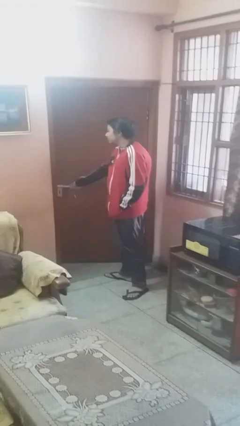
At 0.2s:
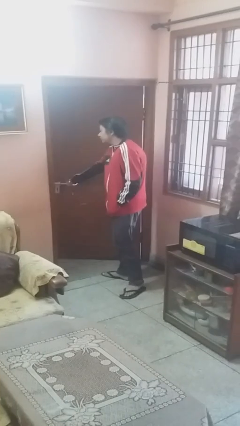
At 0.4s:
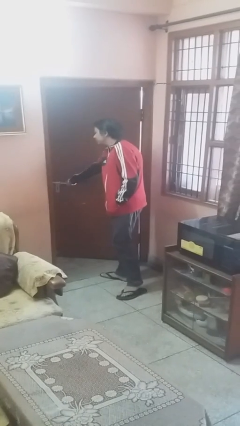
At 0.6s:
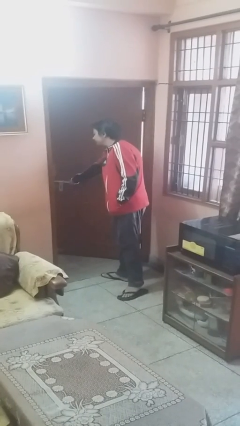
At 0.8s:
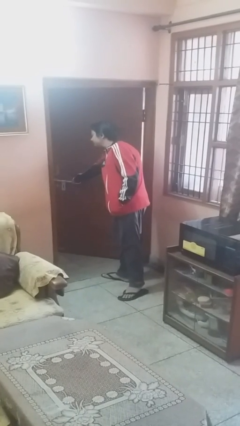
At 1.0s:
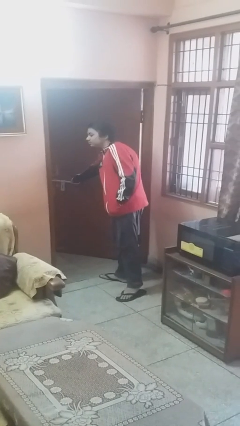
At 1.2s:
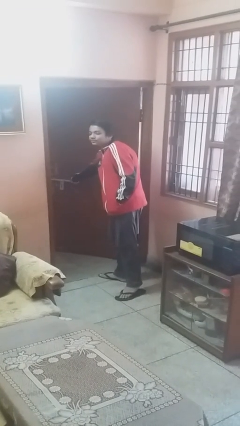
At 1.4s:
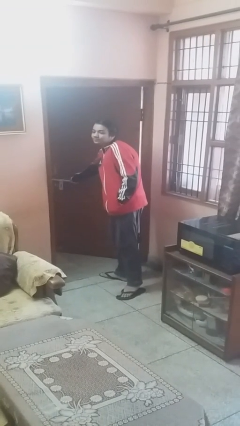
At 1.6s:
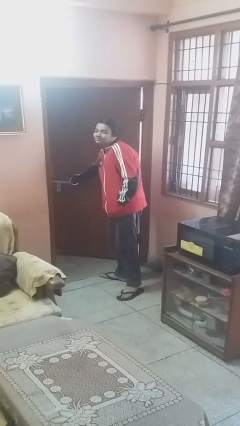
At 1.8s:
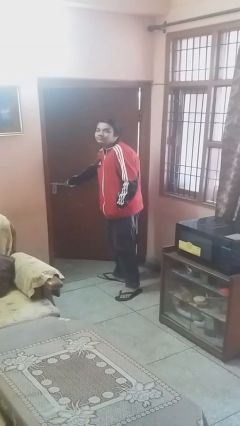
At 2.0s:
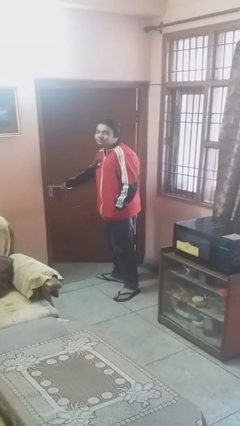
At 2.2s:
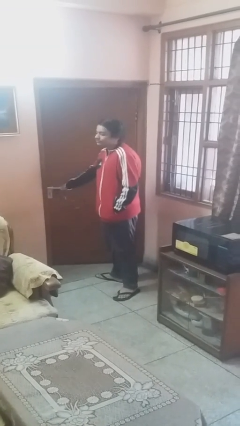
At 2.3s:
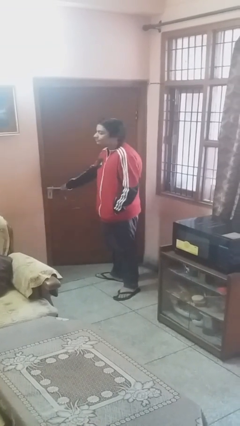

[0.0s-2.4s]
person opens facility door

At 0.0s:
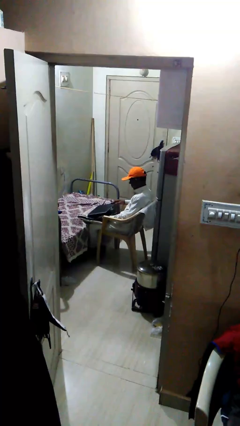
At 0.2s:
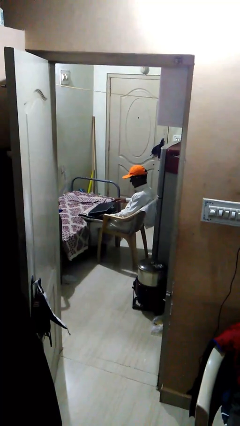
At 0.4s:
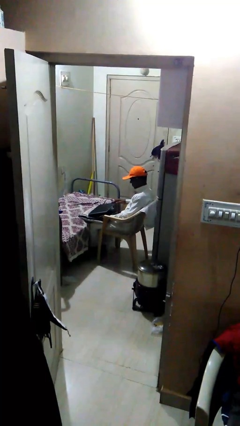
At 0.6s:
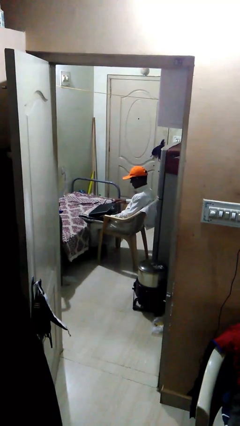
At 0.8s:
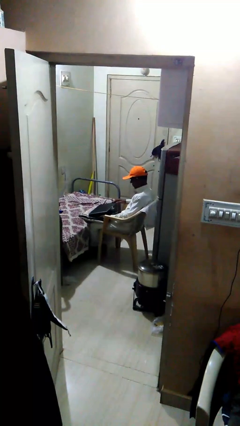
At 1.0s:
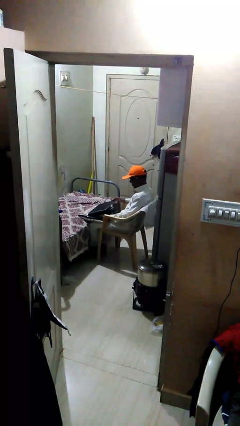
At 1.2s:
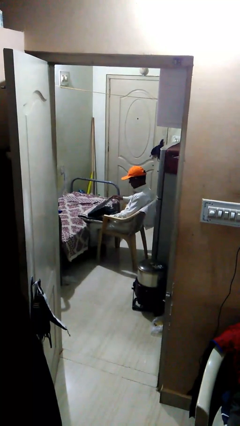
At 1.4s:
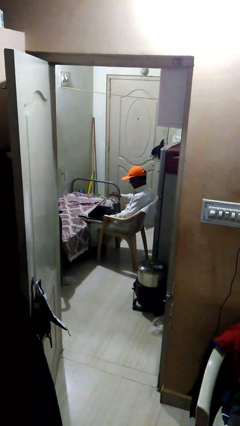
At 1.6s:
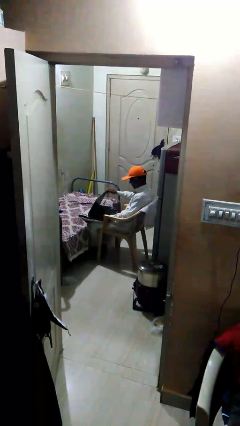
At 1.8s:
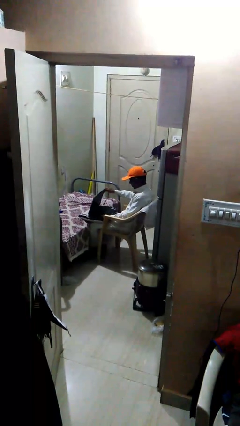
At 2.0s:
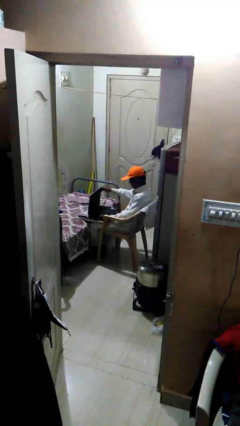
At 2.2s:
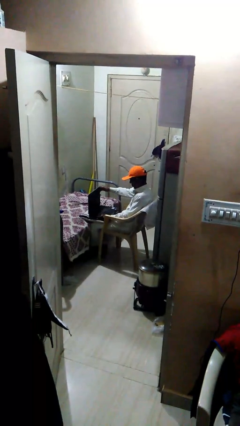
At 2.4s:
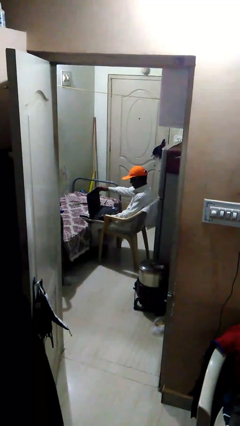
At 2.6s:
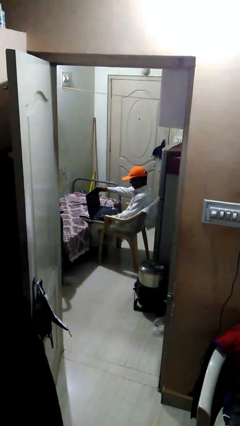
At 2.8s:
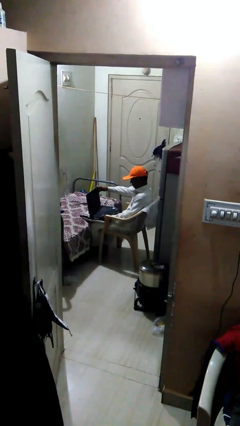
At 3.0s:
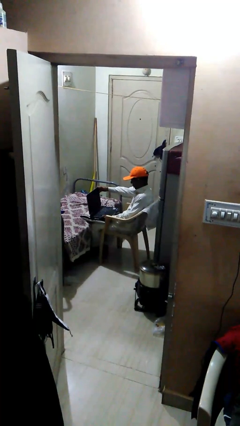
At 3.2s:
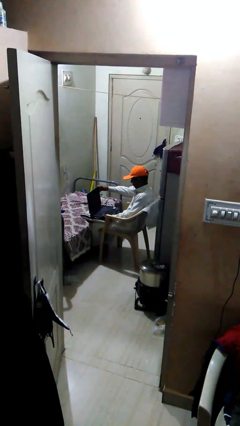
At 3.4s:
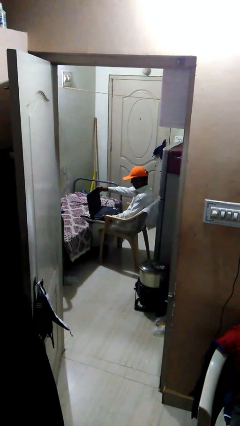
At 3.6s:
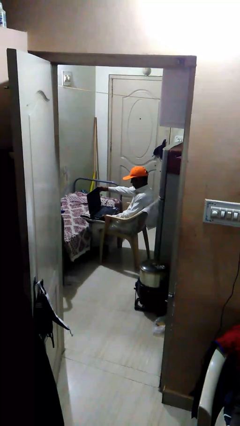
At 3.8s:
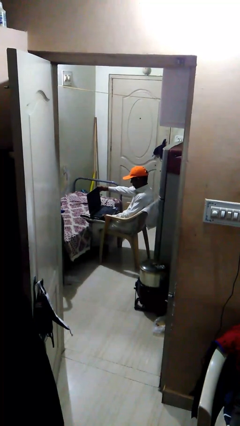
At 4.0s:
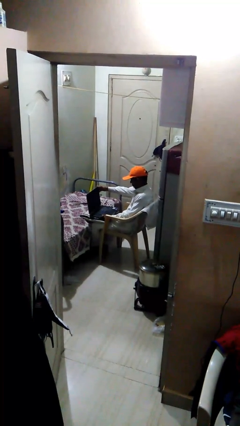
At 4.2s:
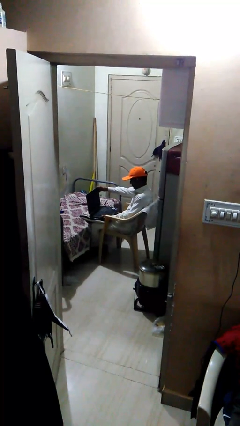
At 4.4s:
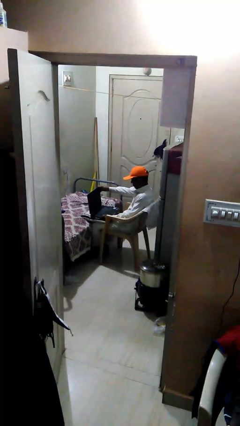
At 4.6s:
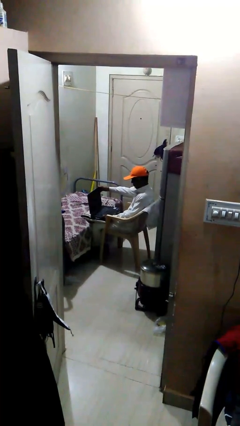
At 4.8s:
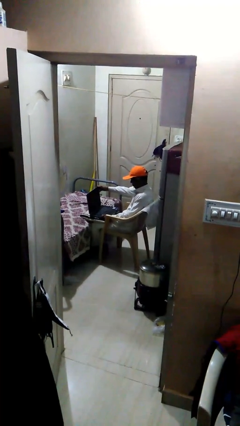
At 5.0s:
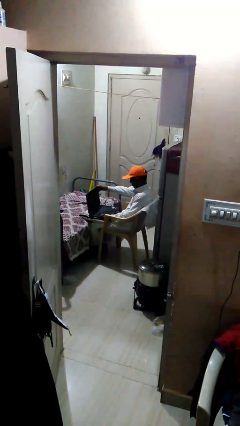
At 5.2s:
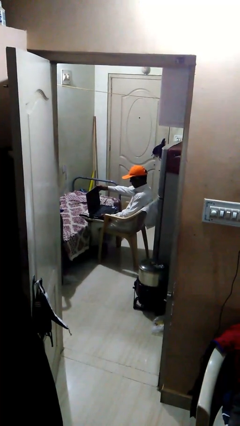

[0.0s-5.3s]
person interacts with laptop

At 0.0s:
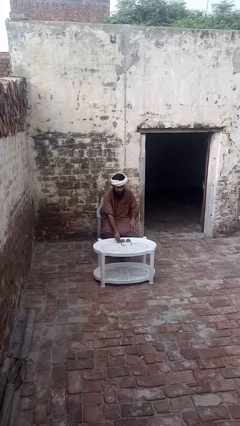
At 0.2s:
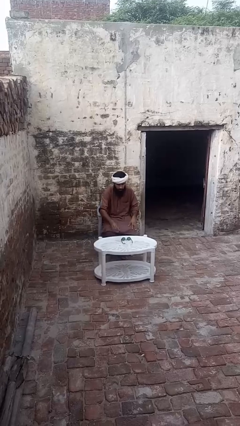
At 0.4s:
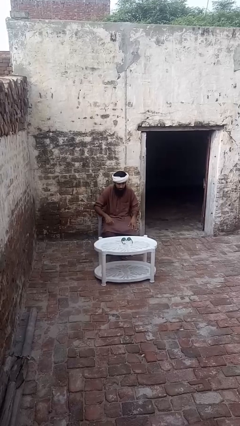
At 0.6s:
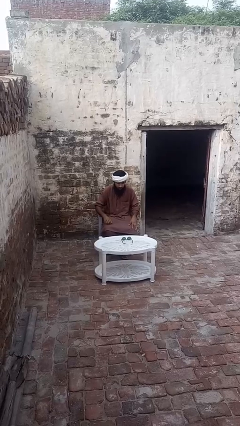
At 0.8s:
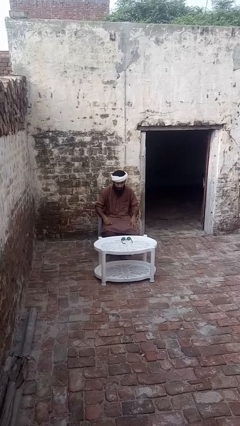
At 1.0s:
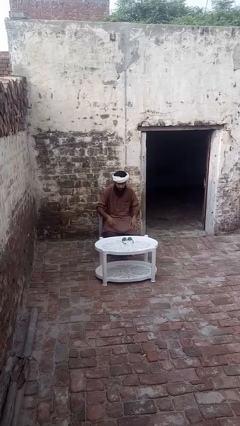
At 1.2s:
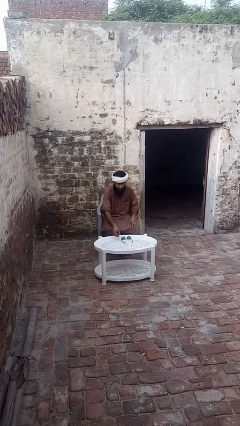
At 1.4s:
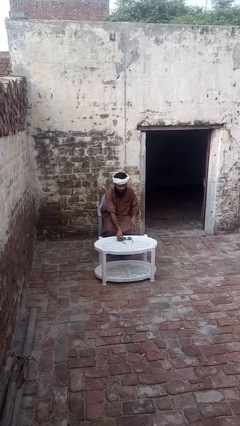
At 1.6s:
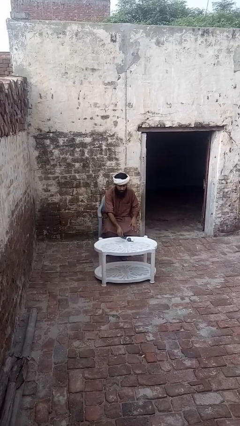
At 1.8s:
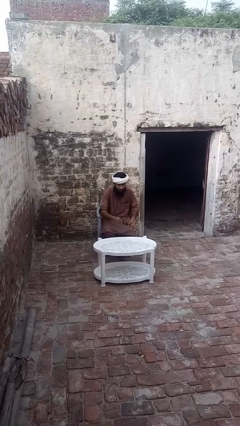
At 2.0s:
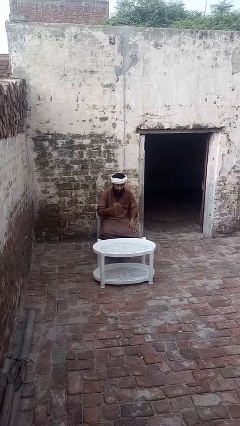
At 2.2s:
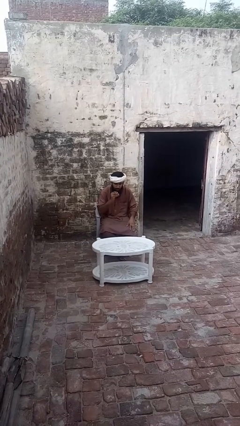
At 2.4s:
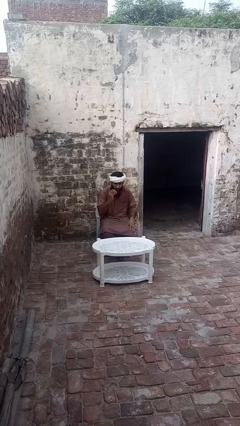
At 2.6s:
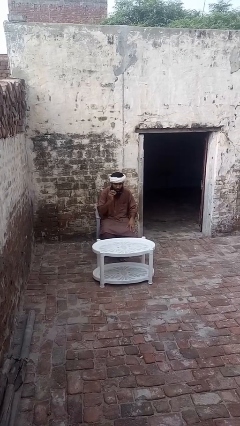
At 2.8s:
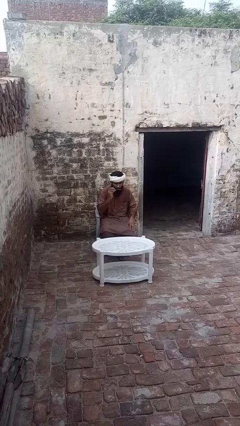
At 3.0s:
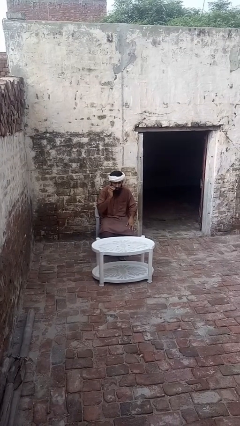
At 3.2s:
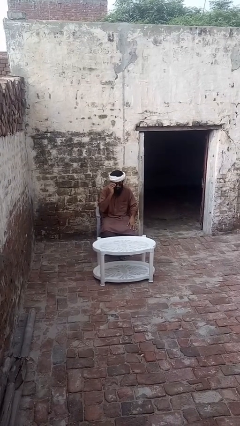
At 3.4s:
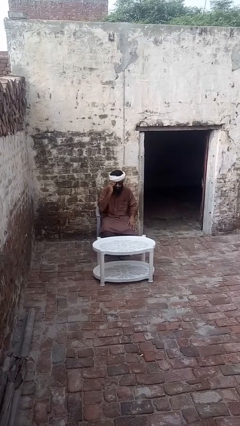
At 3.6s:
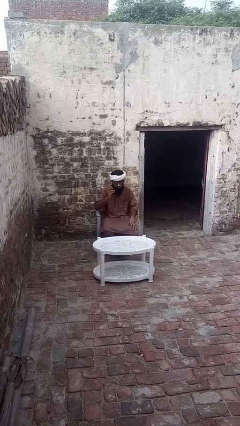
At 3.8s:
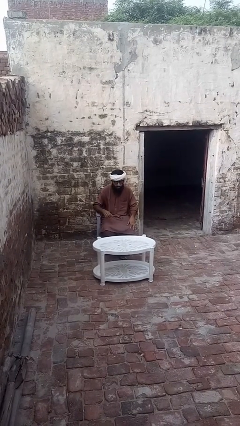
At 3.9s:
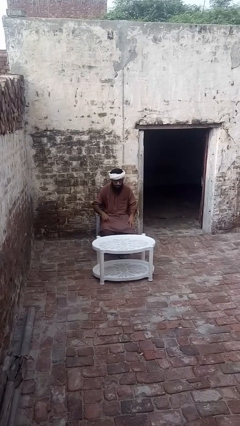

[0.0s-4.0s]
person puts on sunglasses

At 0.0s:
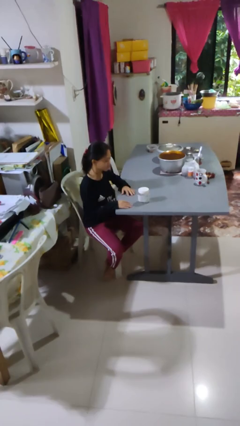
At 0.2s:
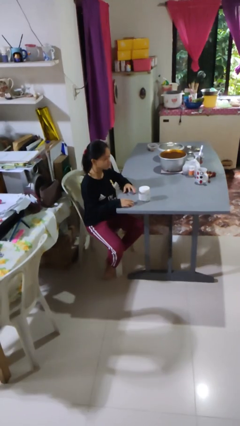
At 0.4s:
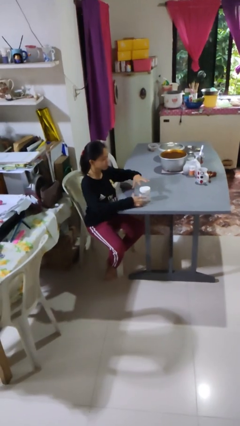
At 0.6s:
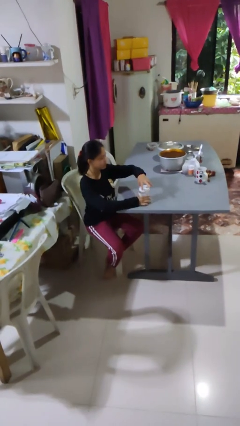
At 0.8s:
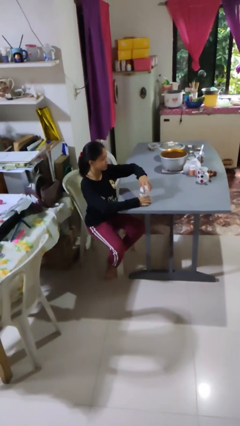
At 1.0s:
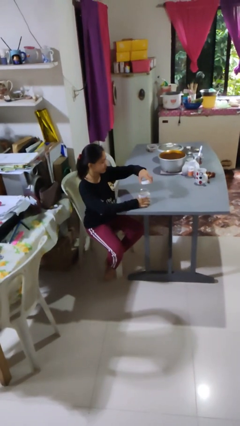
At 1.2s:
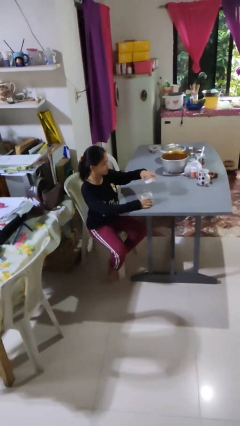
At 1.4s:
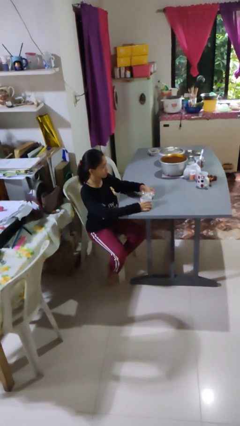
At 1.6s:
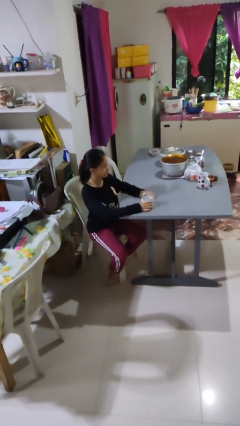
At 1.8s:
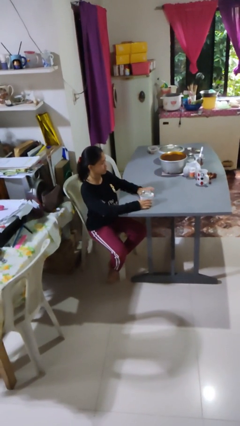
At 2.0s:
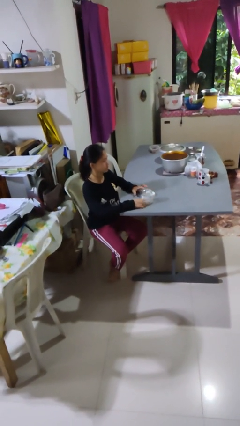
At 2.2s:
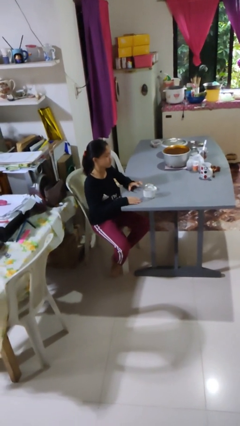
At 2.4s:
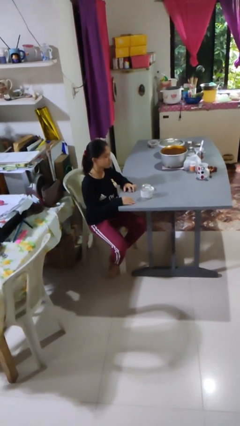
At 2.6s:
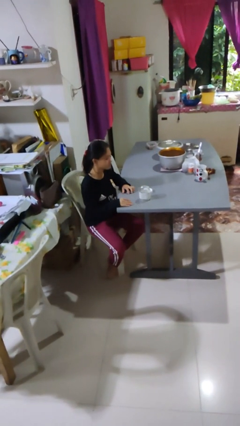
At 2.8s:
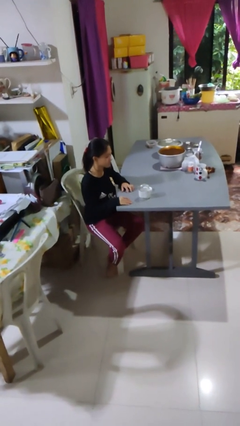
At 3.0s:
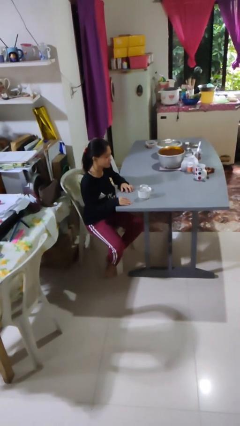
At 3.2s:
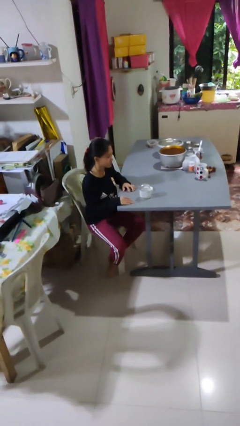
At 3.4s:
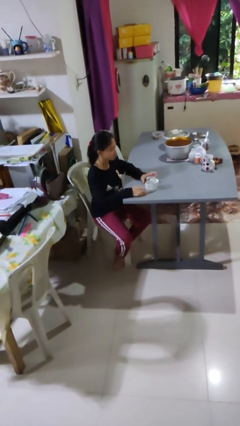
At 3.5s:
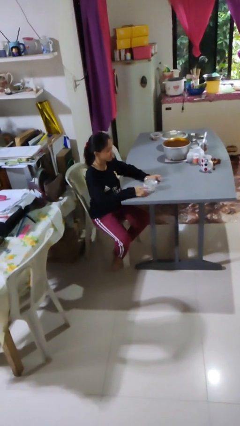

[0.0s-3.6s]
person opens jar

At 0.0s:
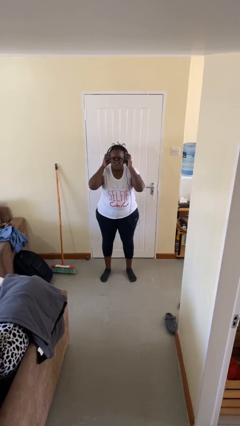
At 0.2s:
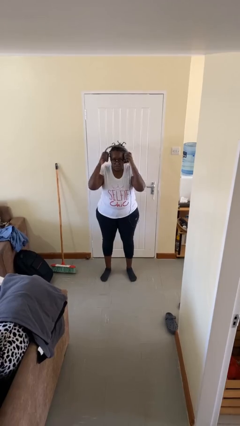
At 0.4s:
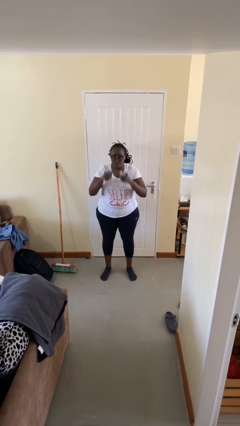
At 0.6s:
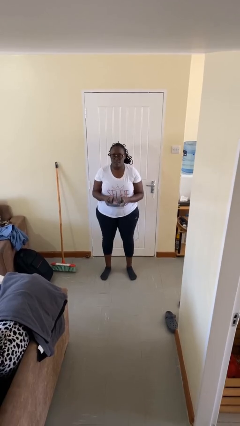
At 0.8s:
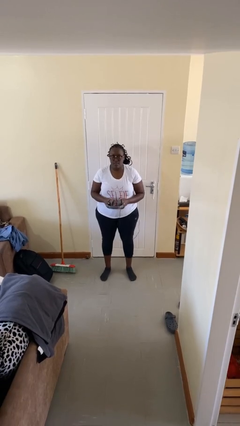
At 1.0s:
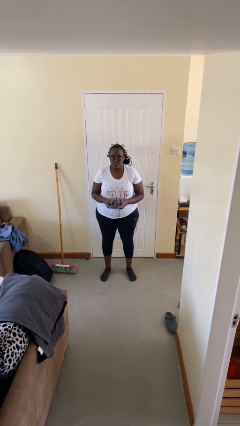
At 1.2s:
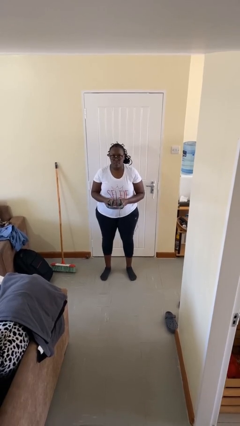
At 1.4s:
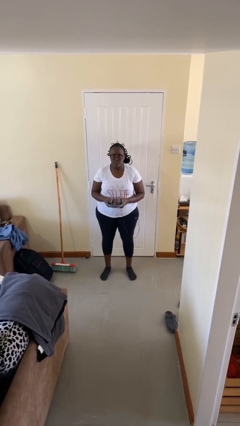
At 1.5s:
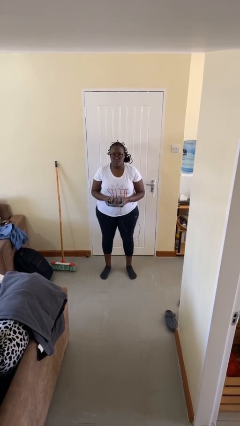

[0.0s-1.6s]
person takes off headphones

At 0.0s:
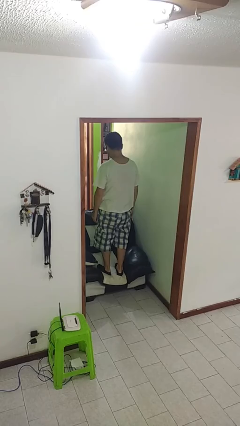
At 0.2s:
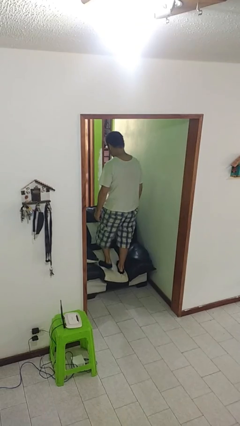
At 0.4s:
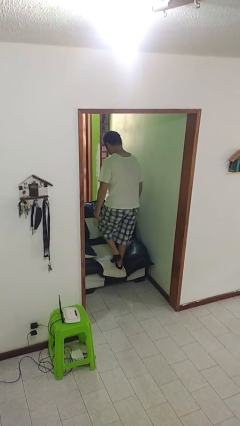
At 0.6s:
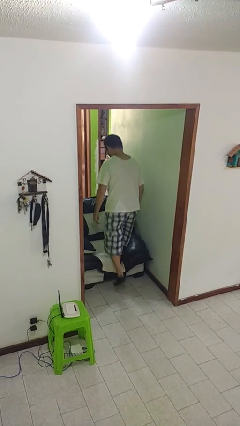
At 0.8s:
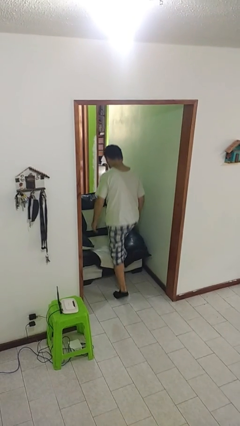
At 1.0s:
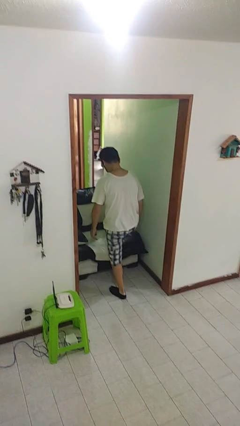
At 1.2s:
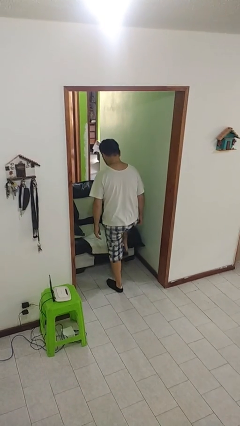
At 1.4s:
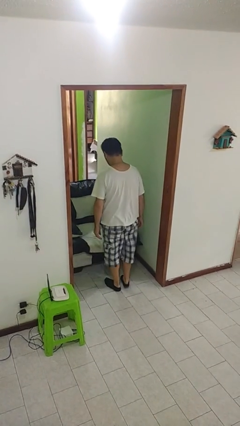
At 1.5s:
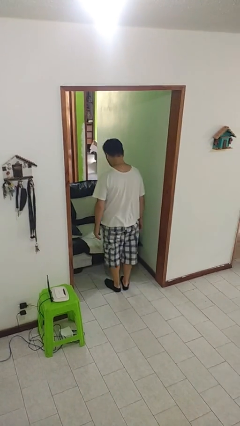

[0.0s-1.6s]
person climbs off couch
